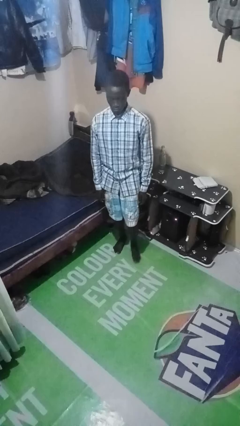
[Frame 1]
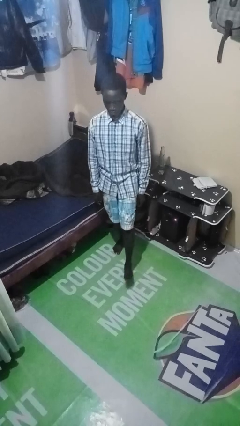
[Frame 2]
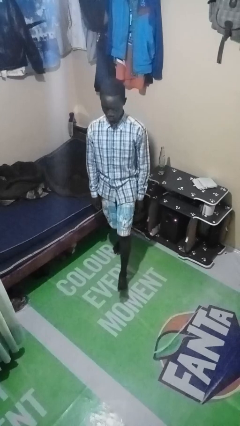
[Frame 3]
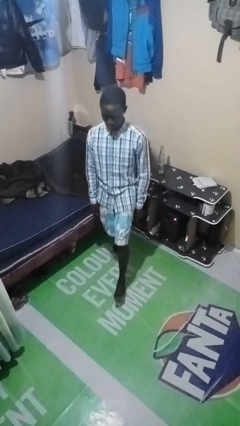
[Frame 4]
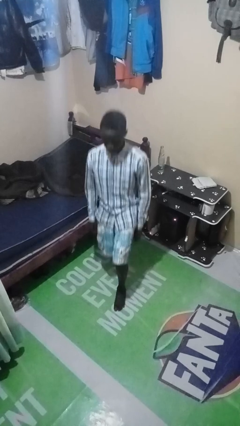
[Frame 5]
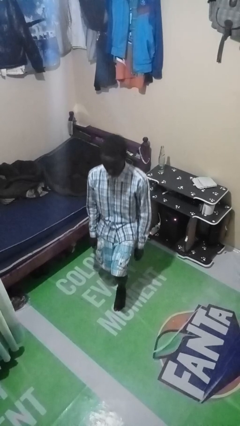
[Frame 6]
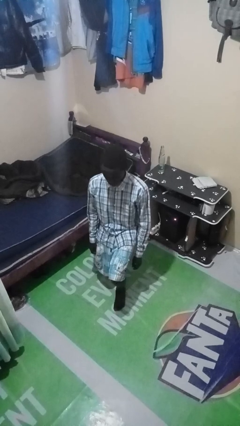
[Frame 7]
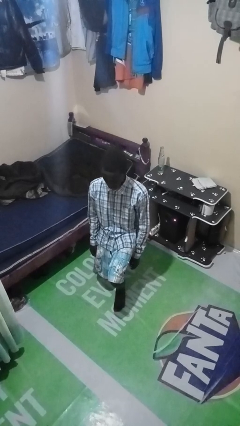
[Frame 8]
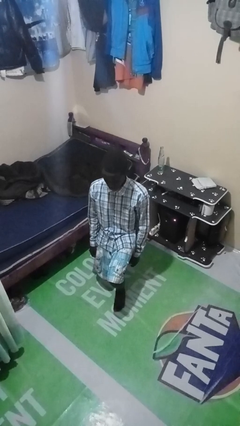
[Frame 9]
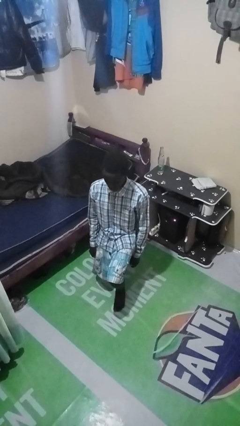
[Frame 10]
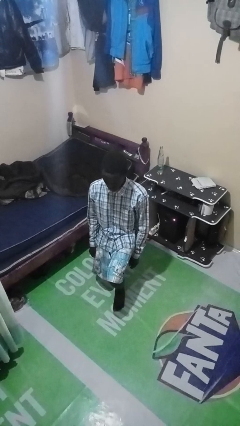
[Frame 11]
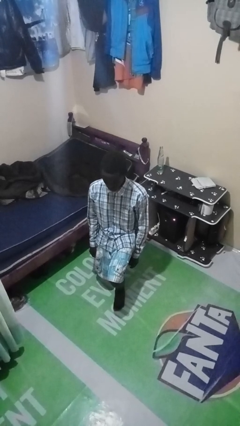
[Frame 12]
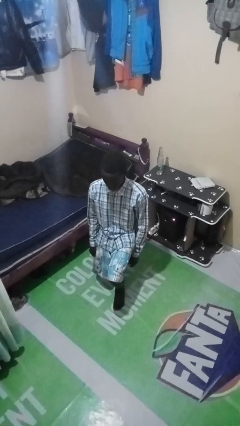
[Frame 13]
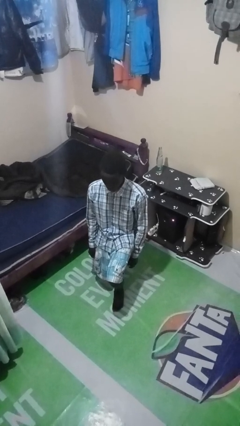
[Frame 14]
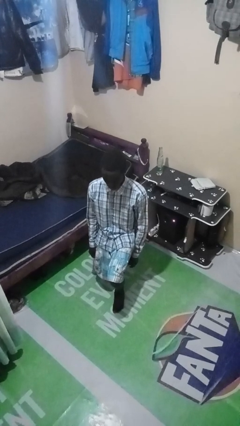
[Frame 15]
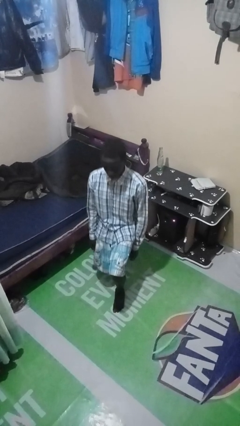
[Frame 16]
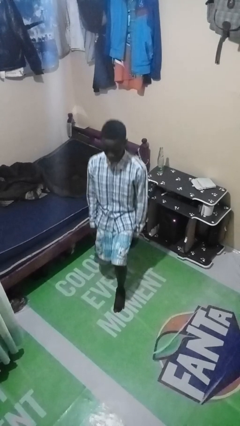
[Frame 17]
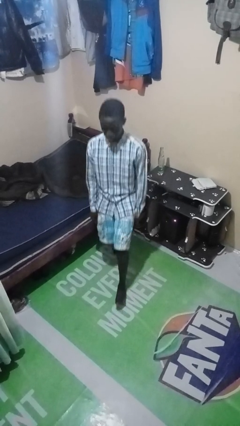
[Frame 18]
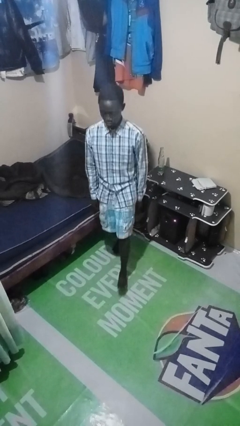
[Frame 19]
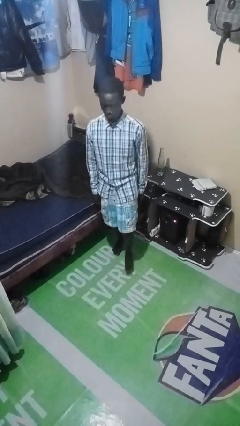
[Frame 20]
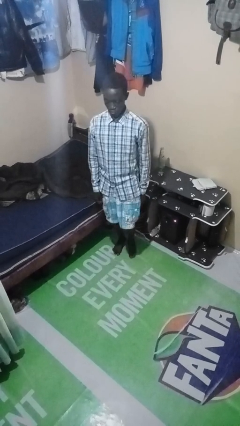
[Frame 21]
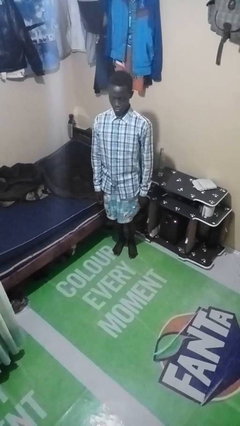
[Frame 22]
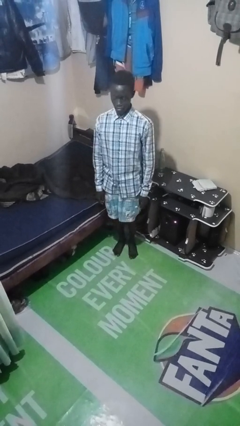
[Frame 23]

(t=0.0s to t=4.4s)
person exercises with lunges

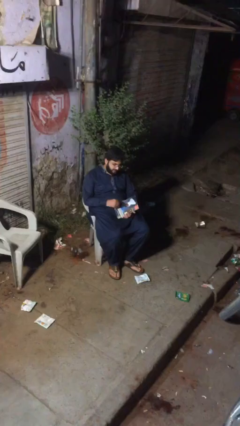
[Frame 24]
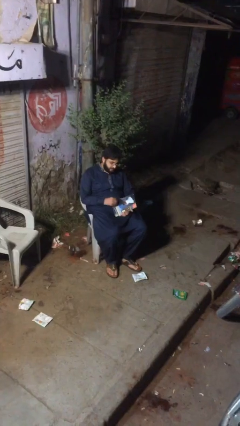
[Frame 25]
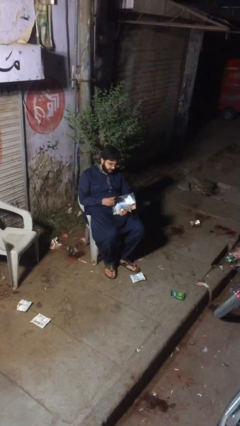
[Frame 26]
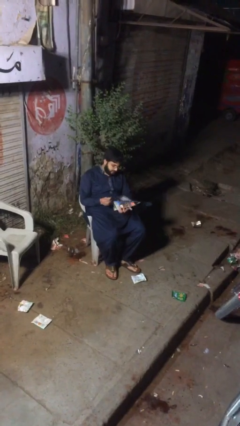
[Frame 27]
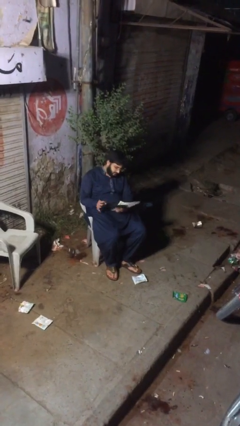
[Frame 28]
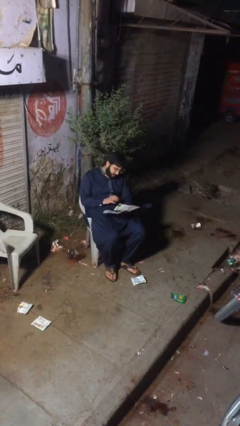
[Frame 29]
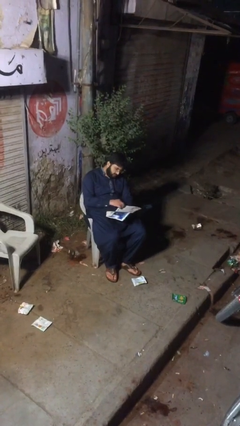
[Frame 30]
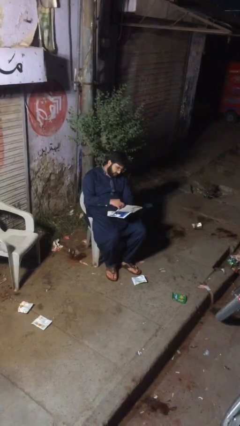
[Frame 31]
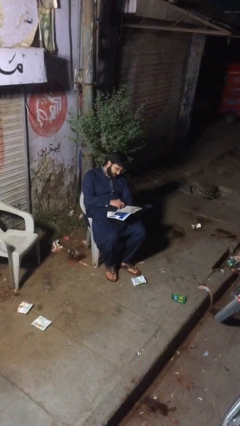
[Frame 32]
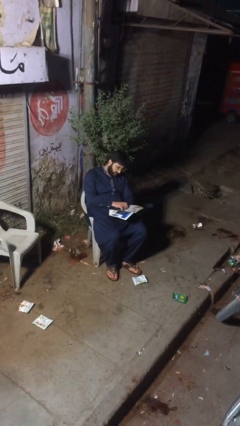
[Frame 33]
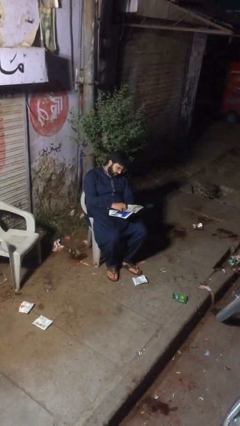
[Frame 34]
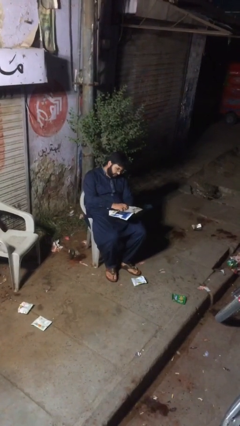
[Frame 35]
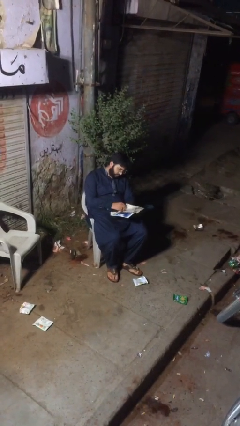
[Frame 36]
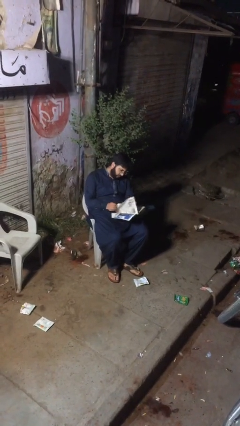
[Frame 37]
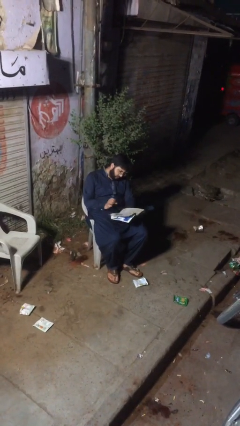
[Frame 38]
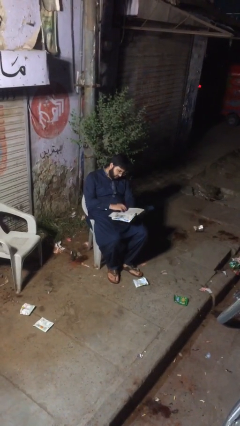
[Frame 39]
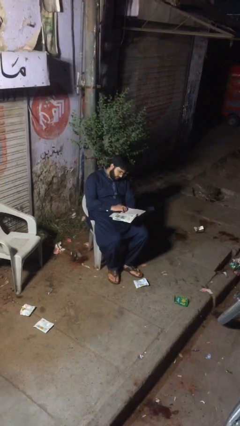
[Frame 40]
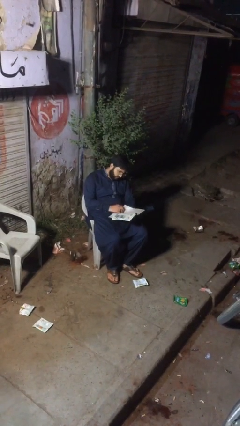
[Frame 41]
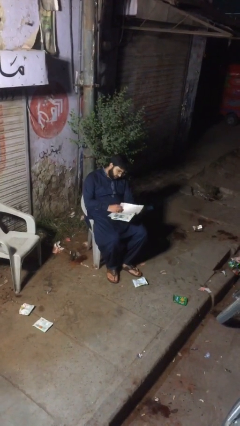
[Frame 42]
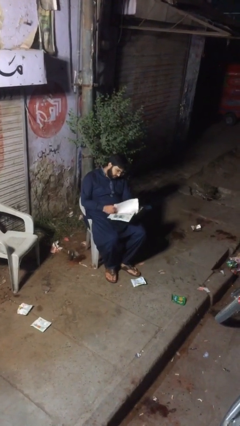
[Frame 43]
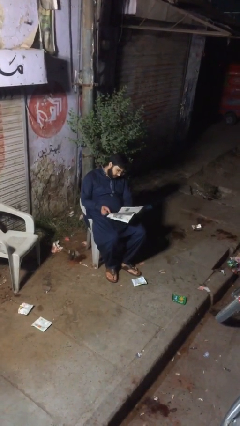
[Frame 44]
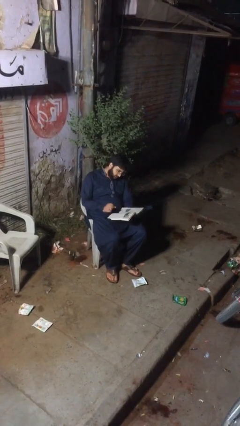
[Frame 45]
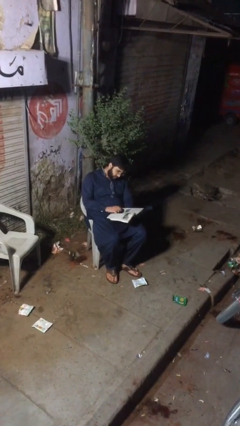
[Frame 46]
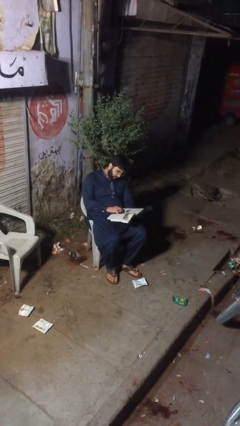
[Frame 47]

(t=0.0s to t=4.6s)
person reads document

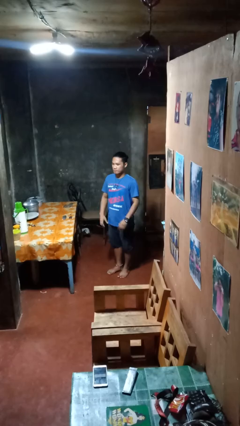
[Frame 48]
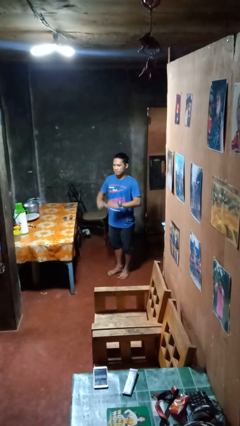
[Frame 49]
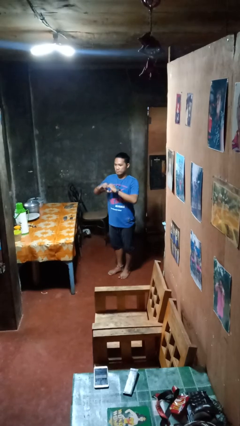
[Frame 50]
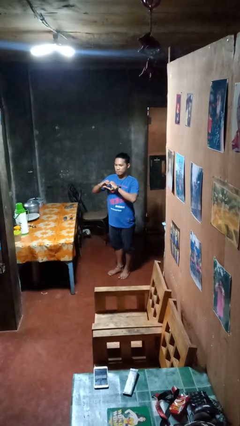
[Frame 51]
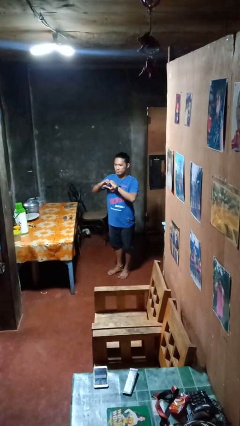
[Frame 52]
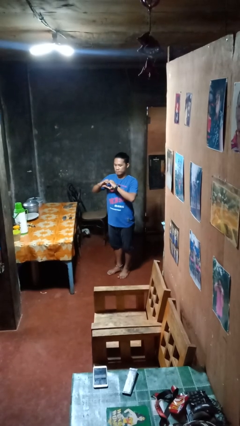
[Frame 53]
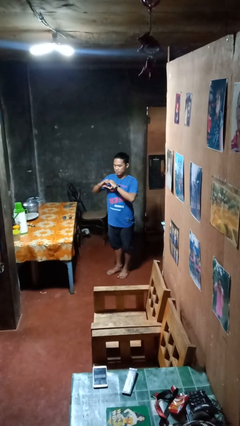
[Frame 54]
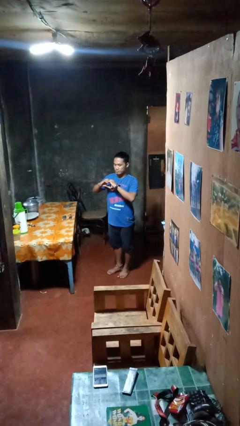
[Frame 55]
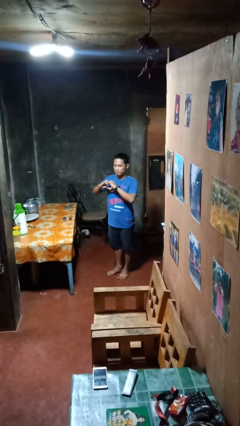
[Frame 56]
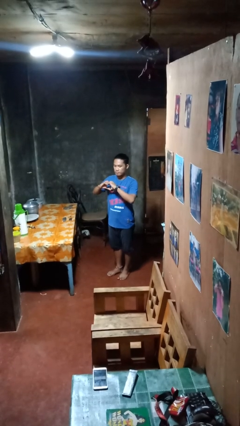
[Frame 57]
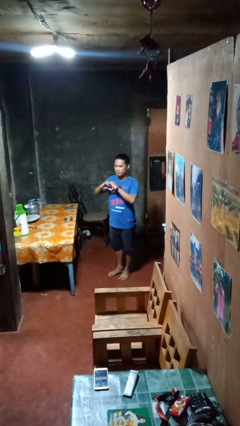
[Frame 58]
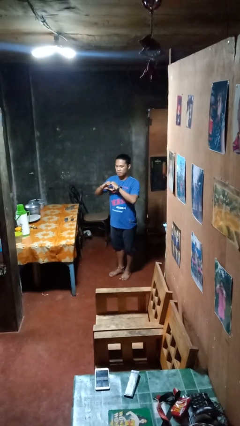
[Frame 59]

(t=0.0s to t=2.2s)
person gestures heart

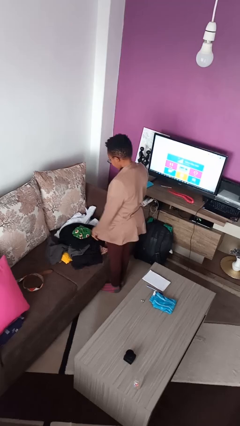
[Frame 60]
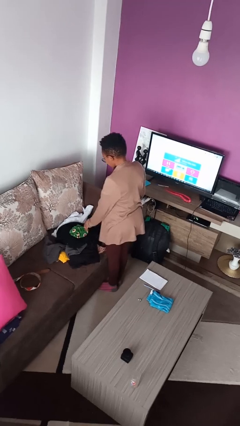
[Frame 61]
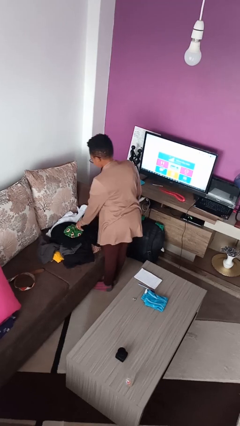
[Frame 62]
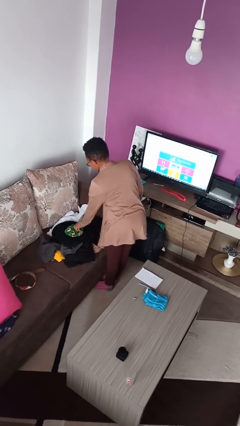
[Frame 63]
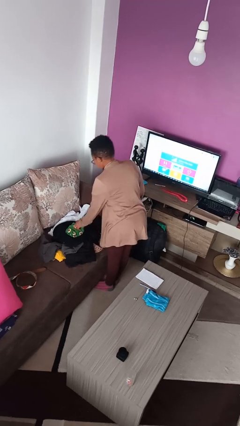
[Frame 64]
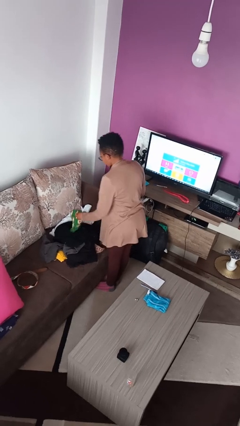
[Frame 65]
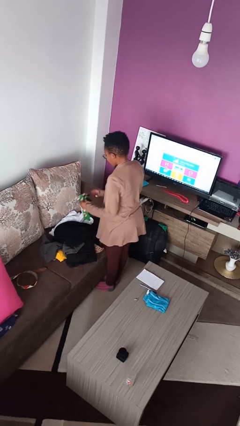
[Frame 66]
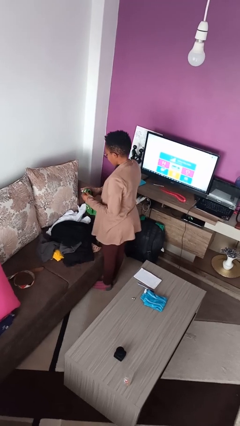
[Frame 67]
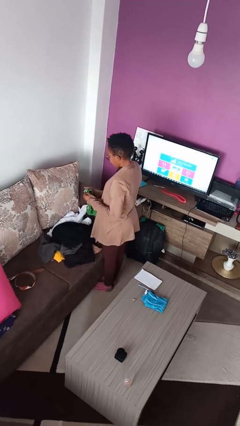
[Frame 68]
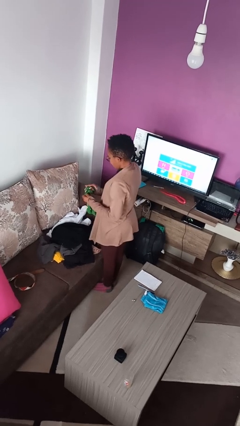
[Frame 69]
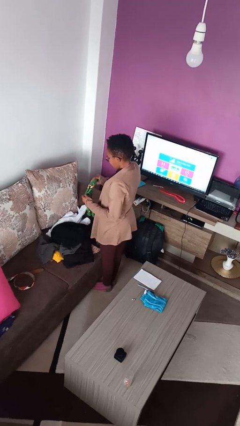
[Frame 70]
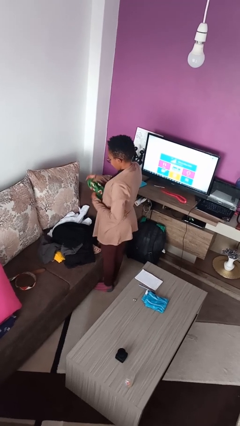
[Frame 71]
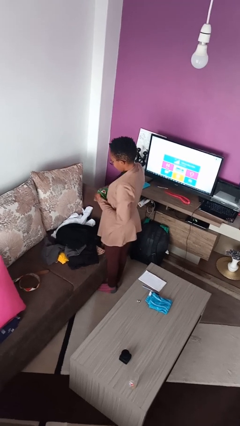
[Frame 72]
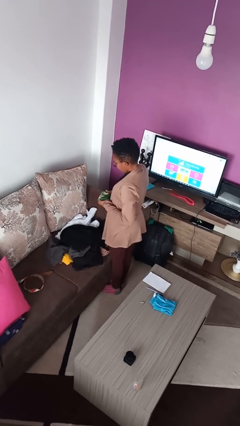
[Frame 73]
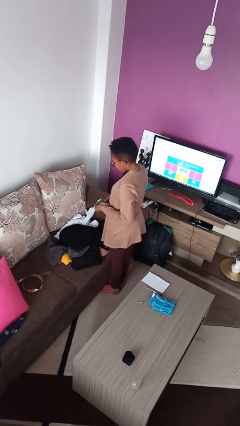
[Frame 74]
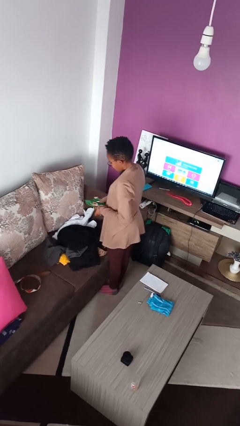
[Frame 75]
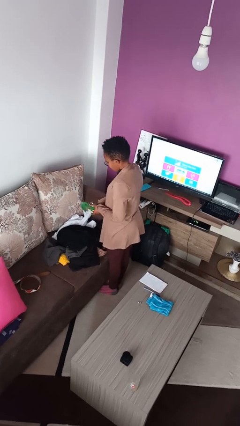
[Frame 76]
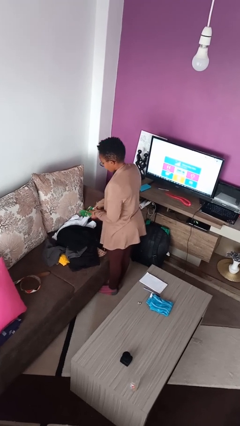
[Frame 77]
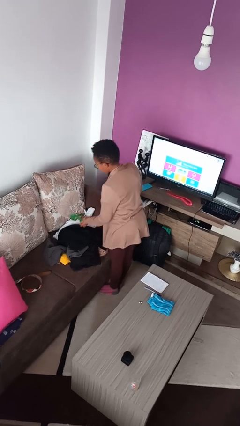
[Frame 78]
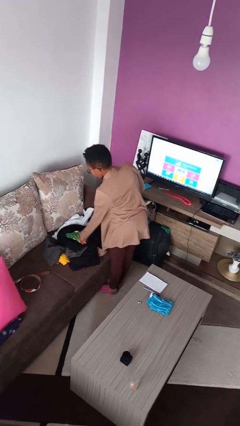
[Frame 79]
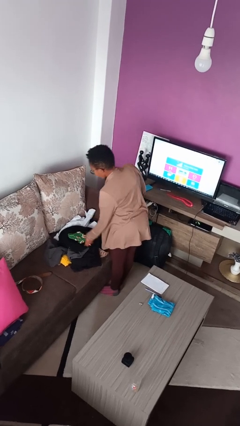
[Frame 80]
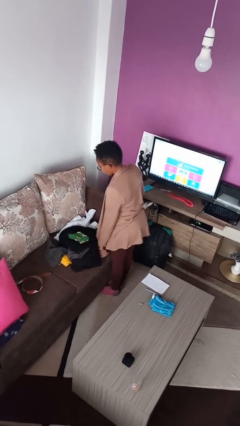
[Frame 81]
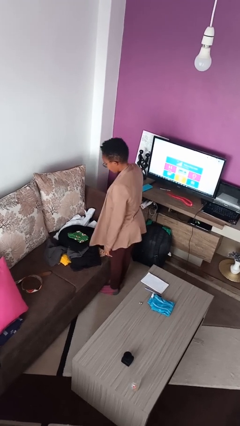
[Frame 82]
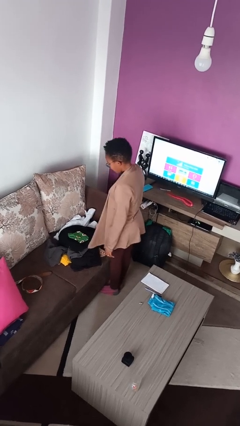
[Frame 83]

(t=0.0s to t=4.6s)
person folds socks

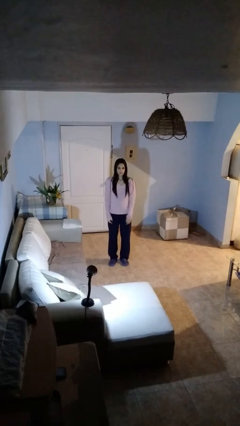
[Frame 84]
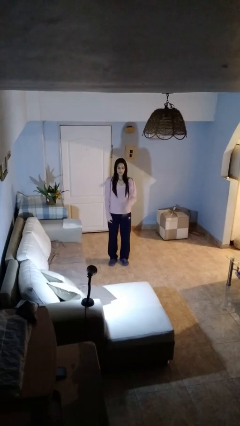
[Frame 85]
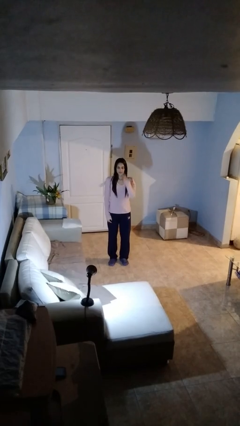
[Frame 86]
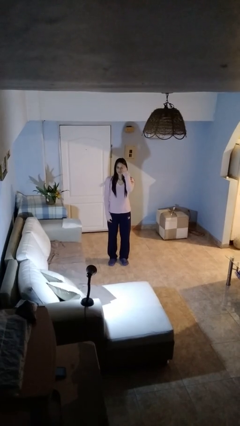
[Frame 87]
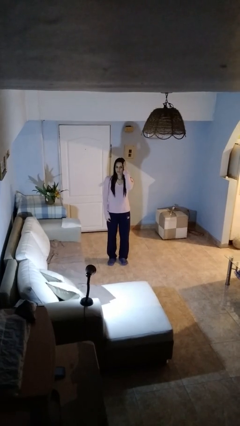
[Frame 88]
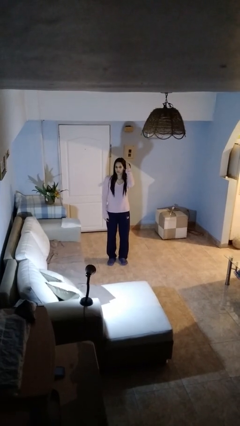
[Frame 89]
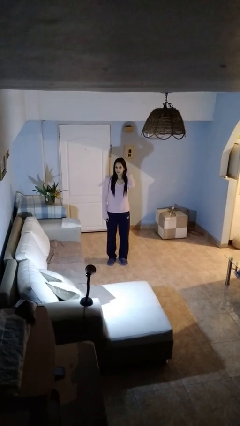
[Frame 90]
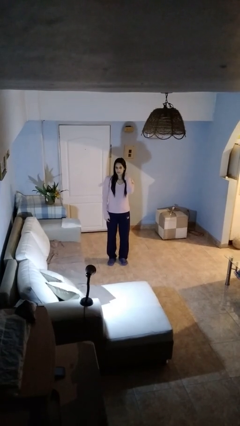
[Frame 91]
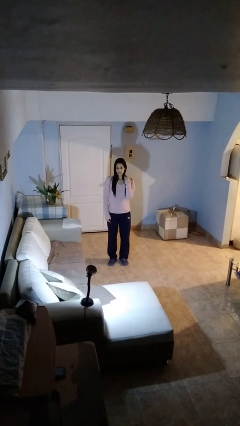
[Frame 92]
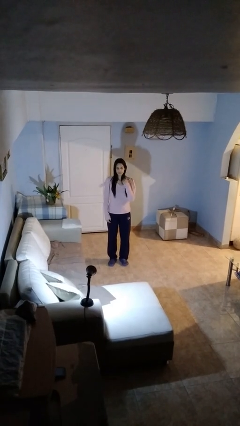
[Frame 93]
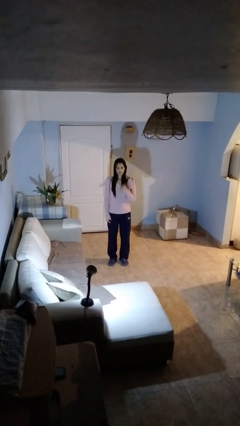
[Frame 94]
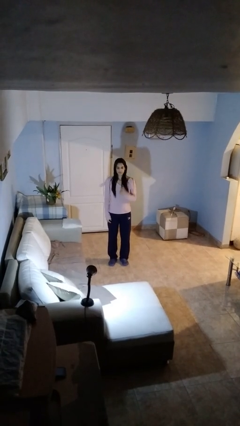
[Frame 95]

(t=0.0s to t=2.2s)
person strokes hair
